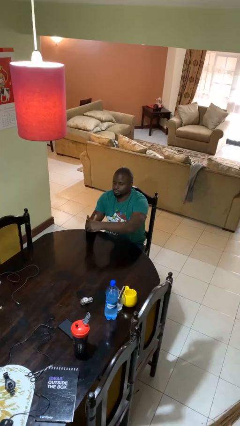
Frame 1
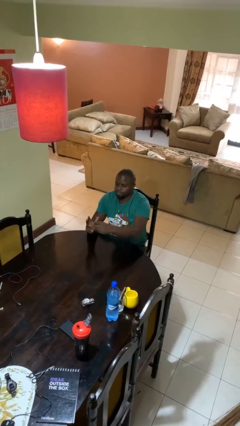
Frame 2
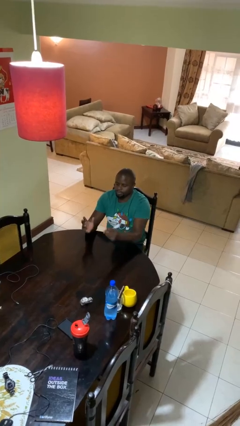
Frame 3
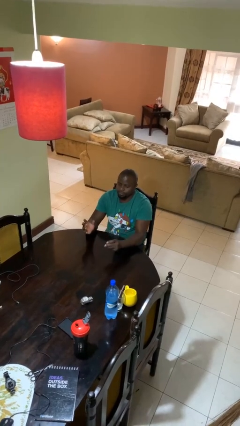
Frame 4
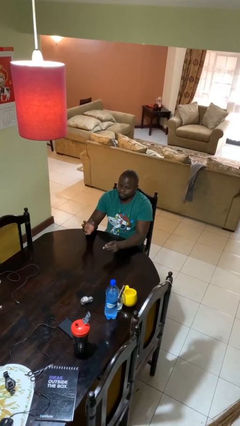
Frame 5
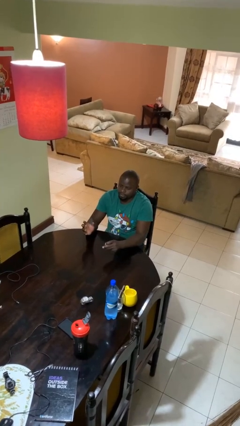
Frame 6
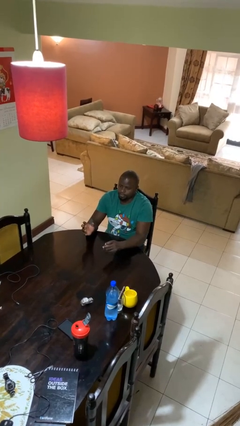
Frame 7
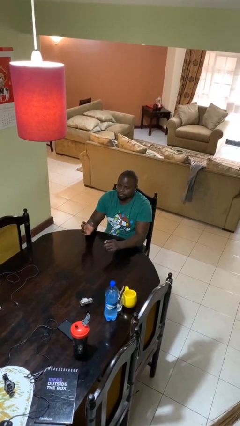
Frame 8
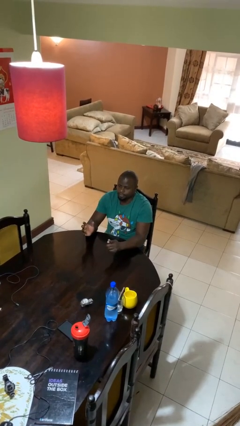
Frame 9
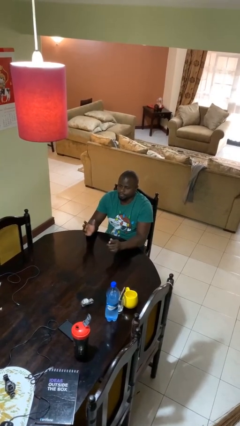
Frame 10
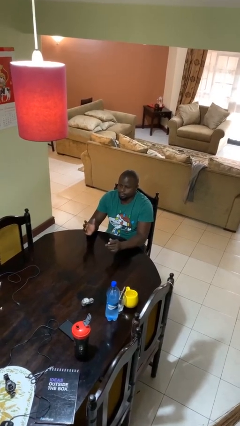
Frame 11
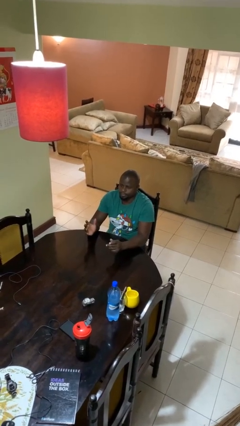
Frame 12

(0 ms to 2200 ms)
person takes off ring

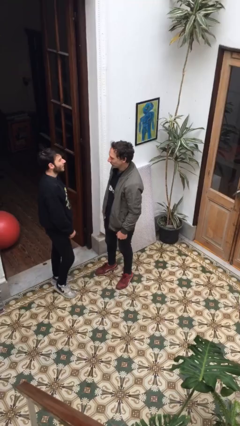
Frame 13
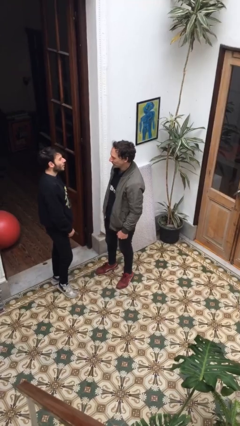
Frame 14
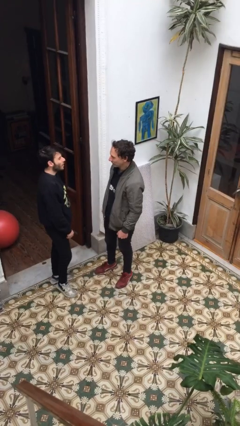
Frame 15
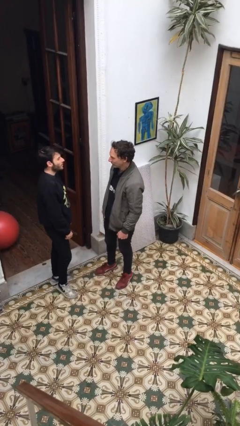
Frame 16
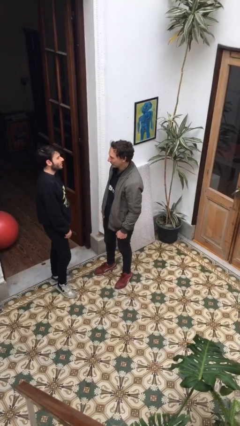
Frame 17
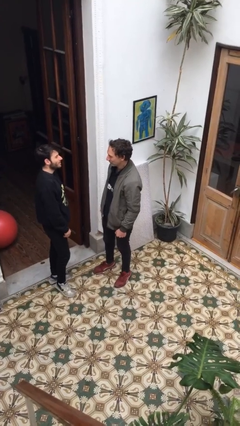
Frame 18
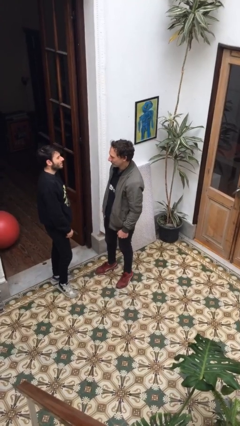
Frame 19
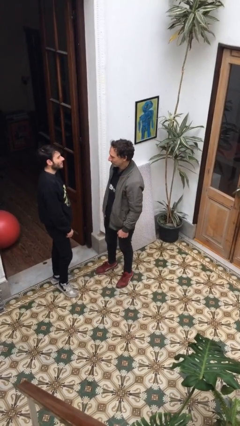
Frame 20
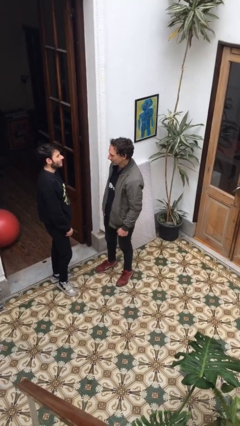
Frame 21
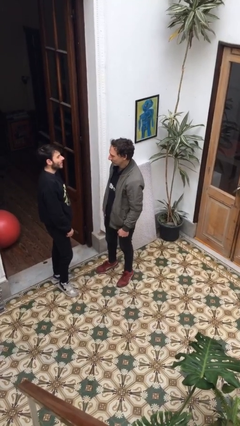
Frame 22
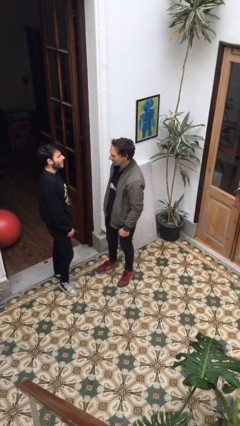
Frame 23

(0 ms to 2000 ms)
person talks to person

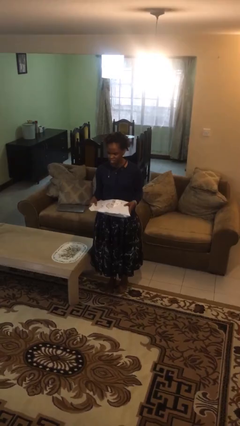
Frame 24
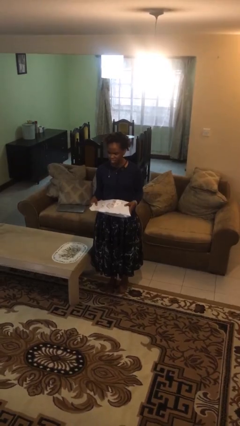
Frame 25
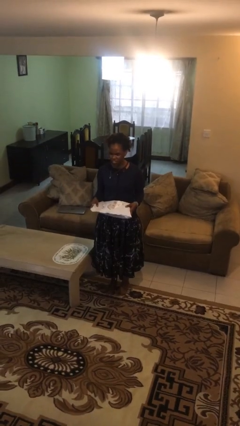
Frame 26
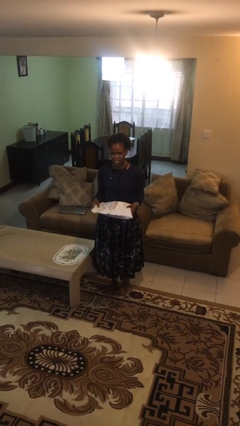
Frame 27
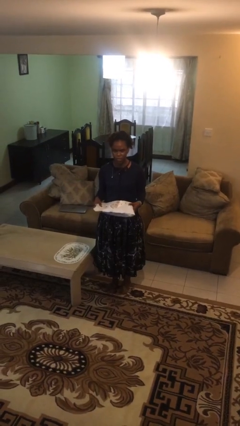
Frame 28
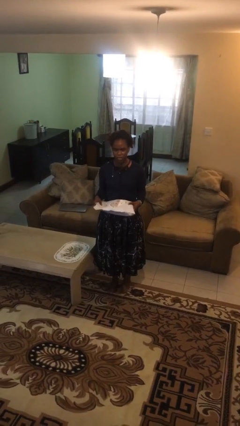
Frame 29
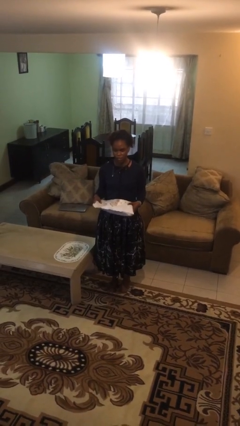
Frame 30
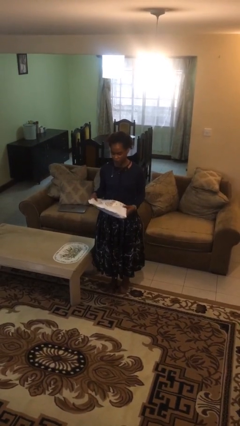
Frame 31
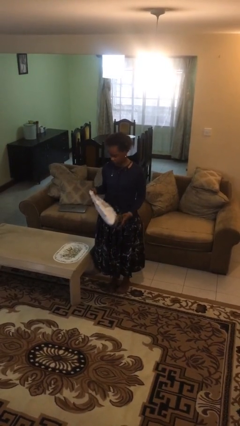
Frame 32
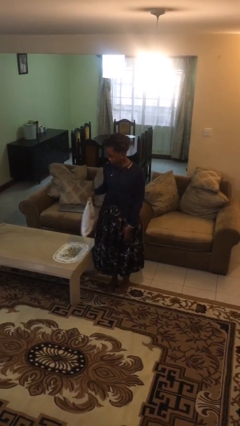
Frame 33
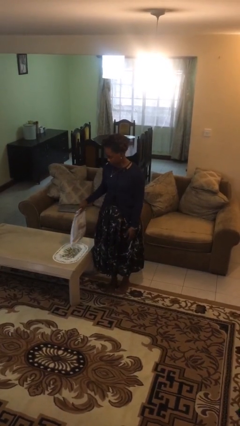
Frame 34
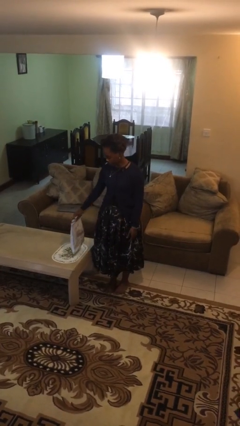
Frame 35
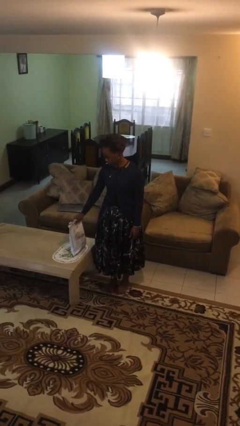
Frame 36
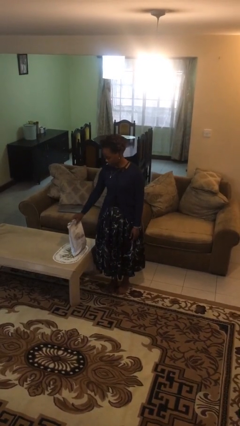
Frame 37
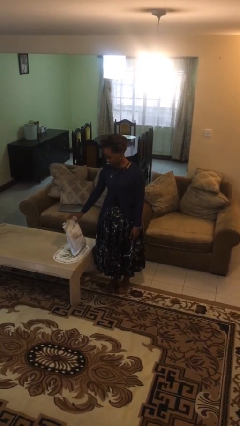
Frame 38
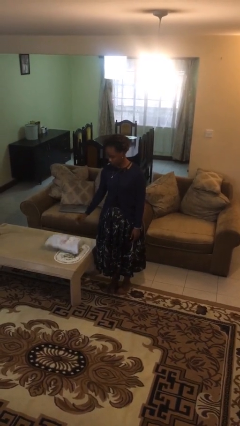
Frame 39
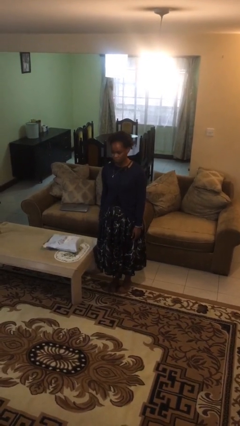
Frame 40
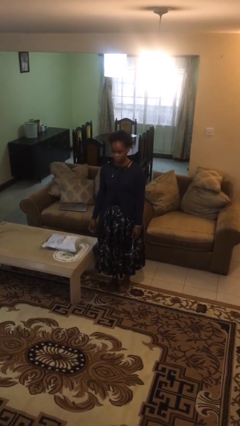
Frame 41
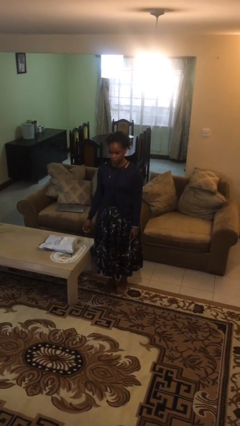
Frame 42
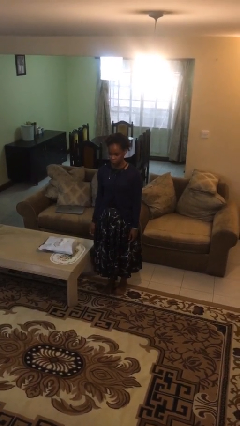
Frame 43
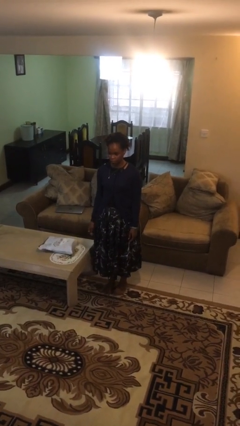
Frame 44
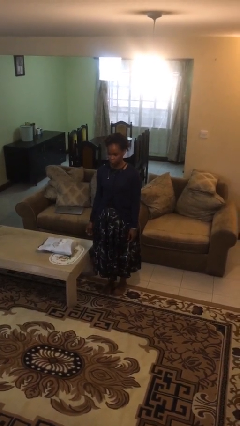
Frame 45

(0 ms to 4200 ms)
person puts down object on table

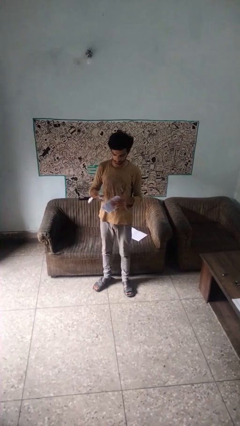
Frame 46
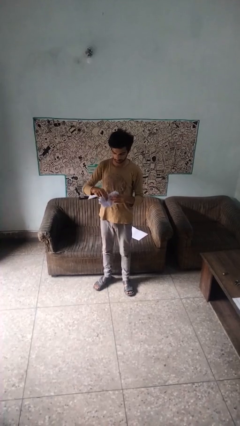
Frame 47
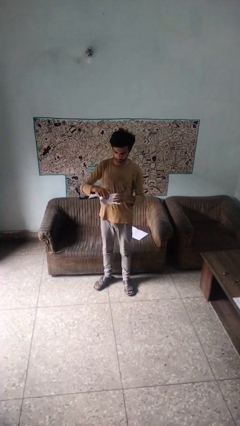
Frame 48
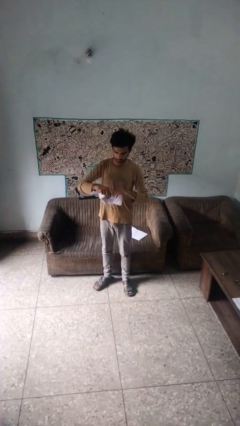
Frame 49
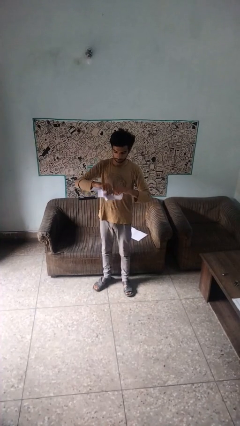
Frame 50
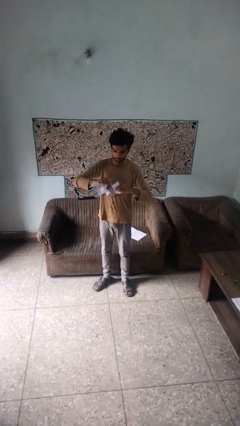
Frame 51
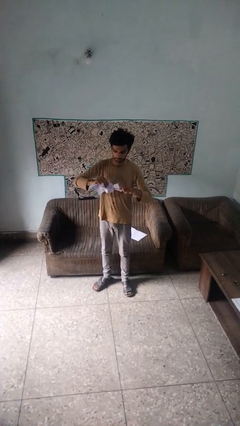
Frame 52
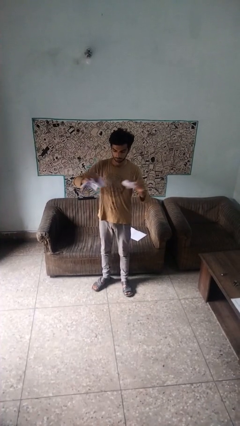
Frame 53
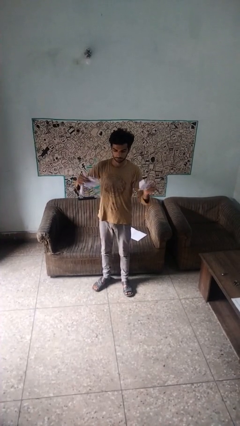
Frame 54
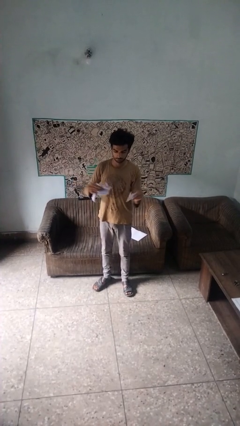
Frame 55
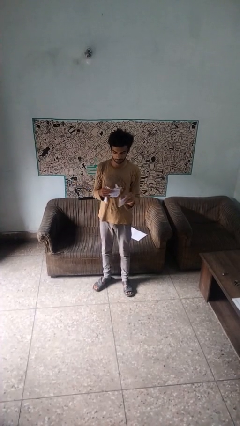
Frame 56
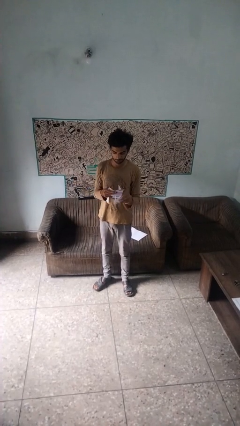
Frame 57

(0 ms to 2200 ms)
person tears paper

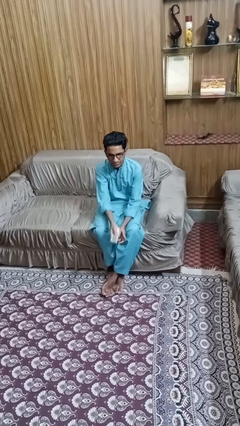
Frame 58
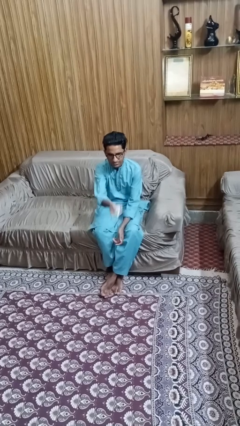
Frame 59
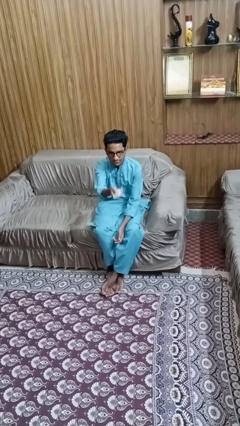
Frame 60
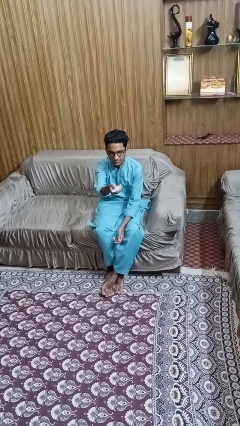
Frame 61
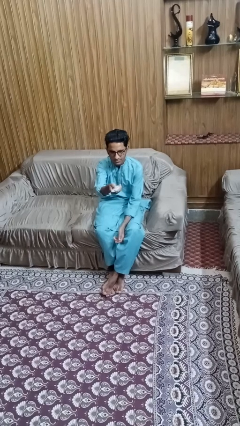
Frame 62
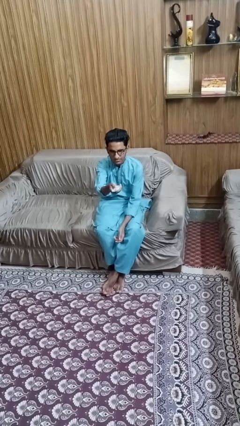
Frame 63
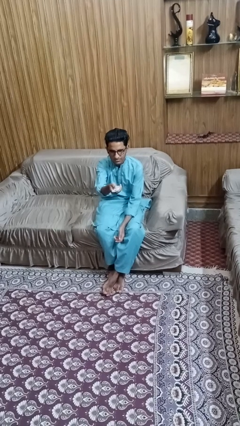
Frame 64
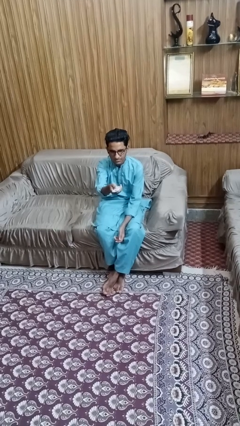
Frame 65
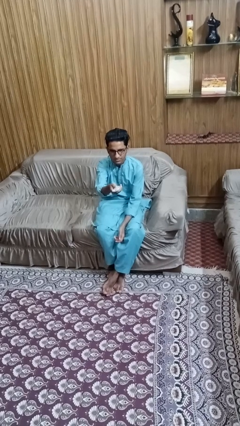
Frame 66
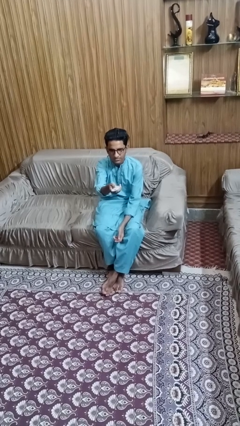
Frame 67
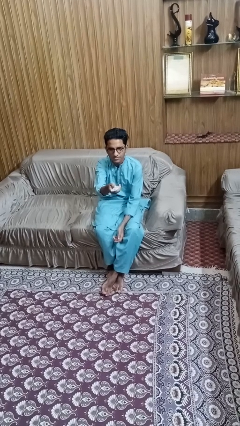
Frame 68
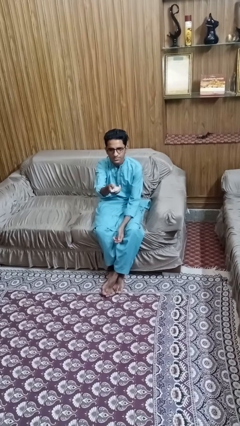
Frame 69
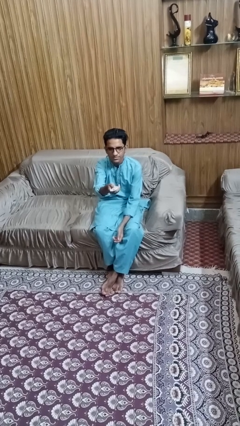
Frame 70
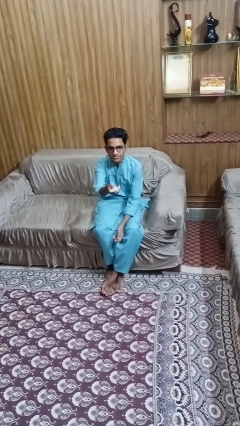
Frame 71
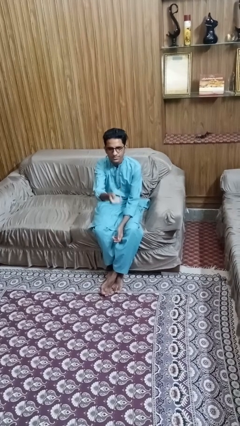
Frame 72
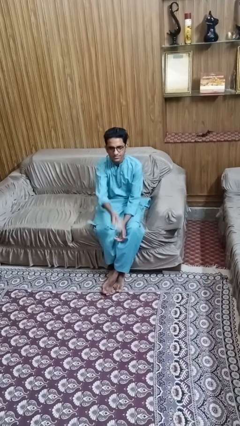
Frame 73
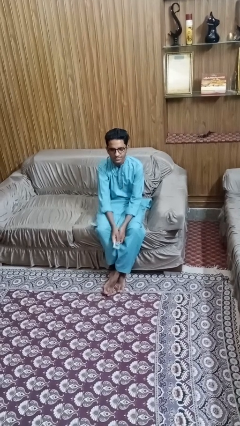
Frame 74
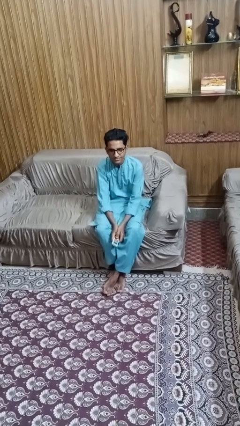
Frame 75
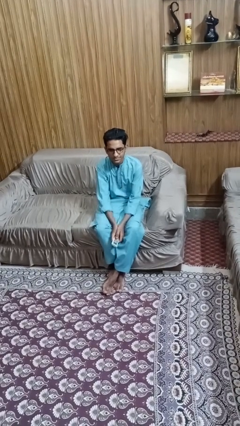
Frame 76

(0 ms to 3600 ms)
person uses television remote

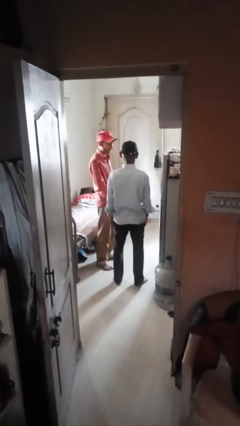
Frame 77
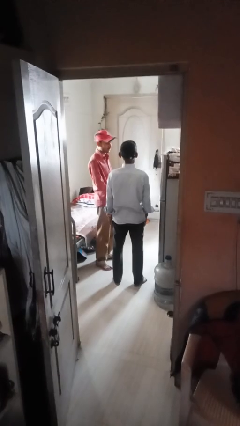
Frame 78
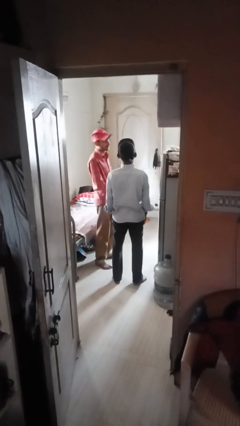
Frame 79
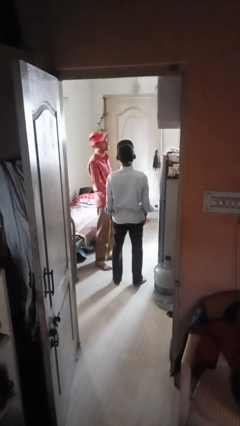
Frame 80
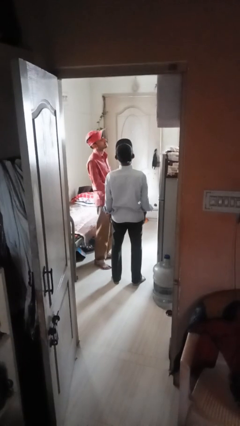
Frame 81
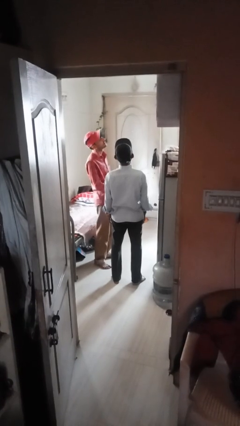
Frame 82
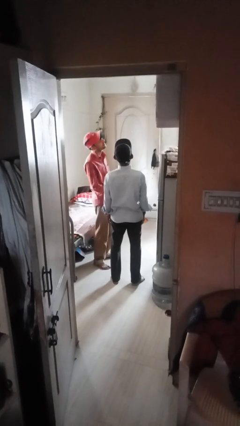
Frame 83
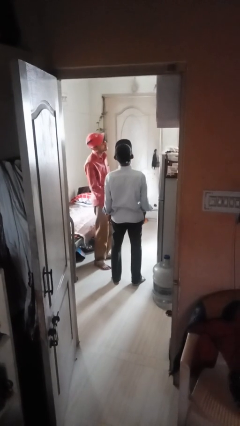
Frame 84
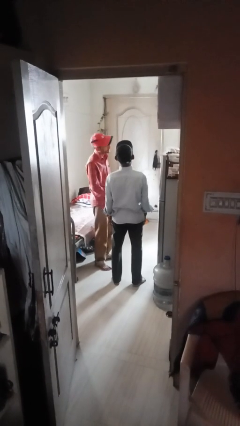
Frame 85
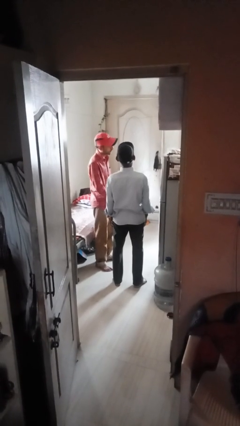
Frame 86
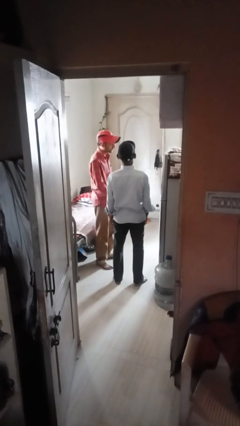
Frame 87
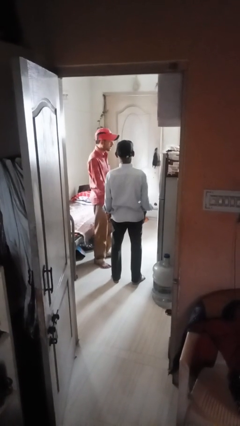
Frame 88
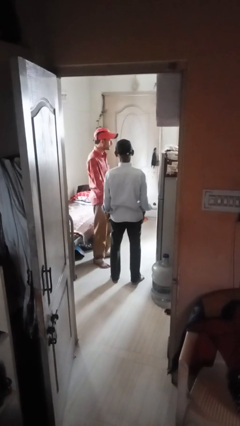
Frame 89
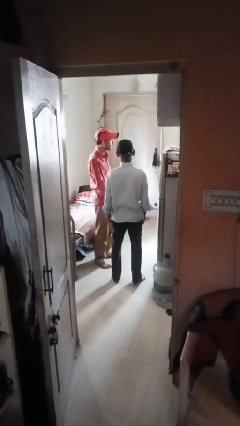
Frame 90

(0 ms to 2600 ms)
person laughs with person

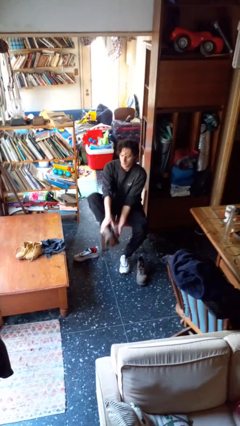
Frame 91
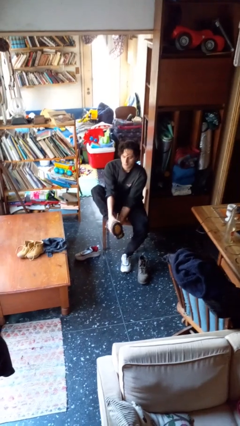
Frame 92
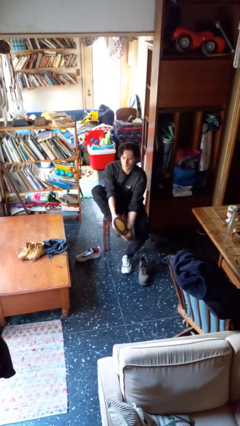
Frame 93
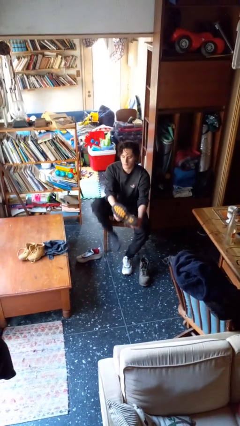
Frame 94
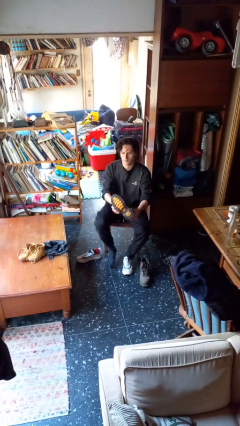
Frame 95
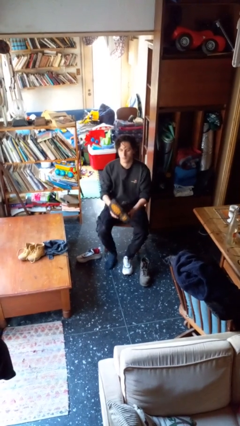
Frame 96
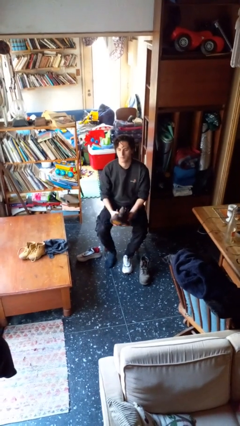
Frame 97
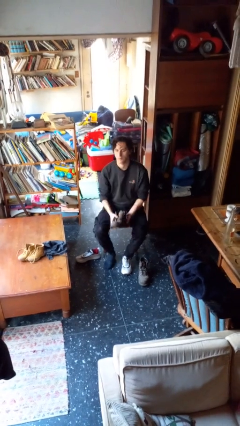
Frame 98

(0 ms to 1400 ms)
person takes off boots
